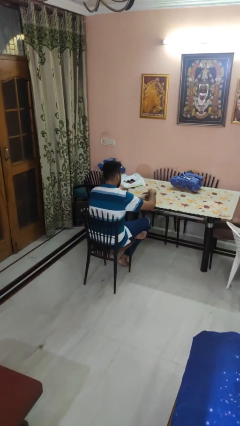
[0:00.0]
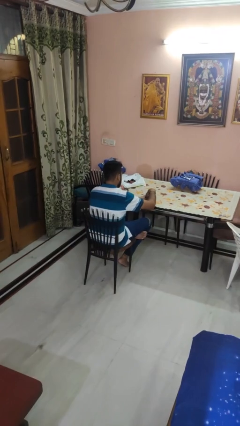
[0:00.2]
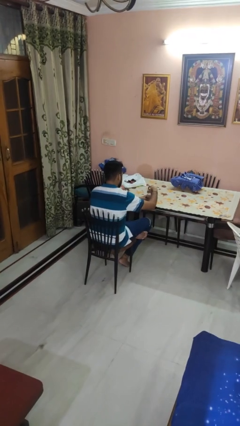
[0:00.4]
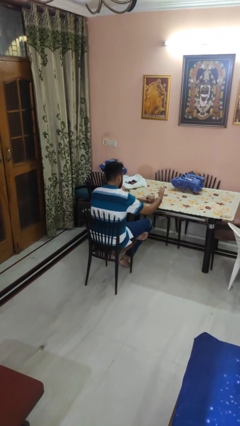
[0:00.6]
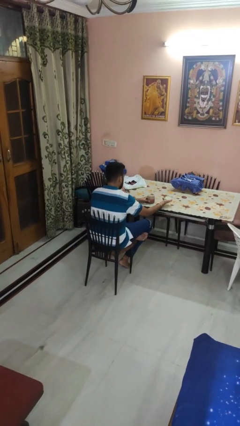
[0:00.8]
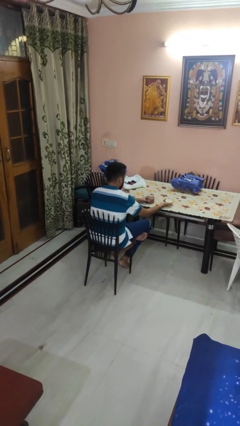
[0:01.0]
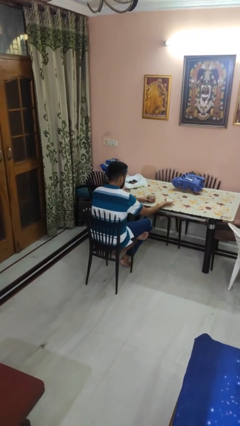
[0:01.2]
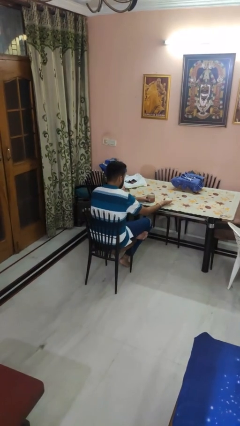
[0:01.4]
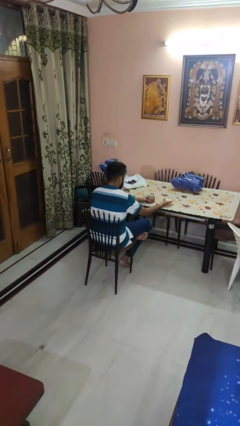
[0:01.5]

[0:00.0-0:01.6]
person opens jar

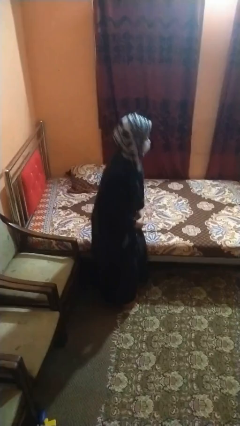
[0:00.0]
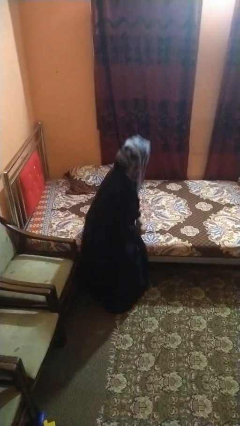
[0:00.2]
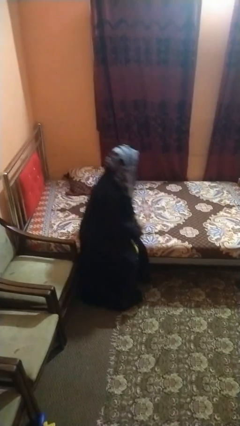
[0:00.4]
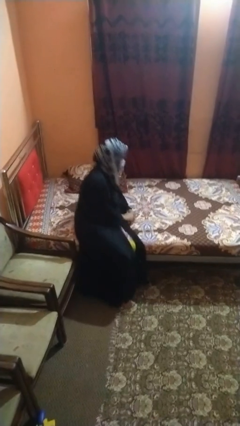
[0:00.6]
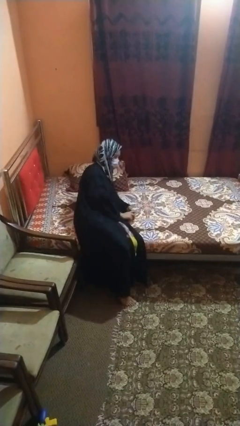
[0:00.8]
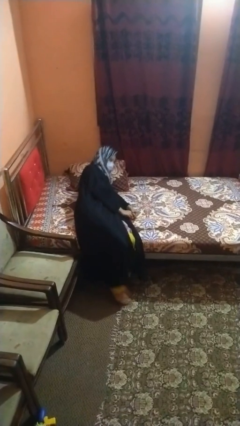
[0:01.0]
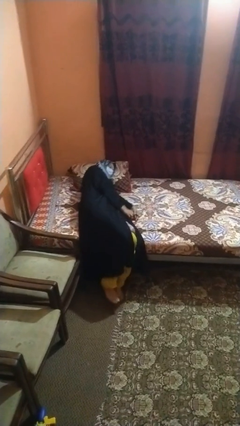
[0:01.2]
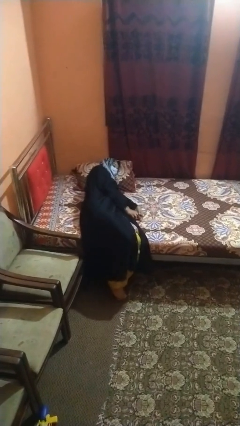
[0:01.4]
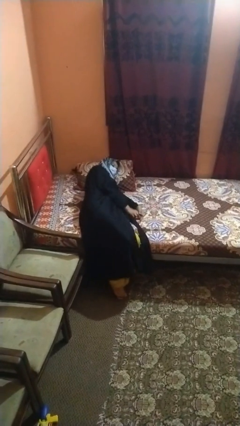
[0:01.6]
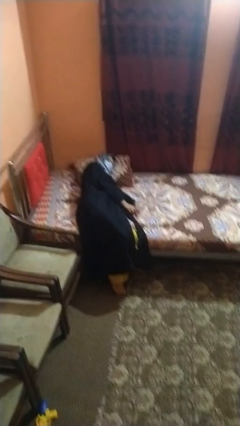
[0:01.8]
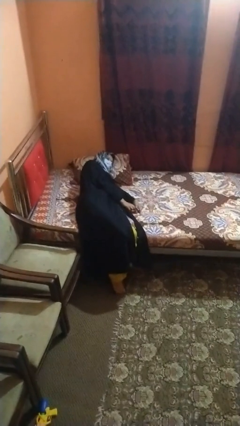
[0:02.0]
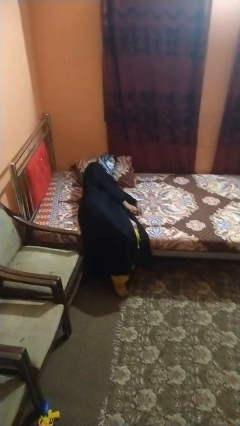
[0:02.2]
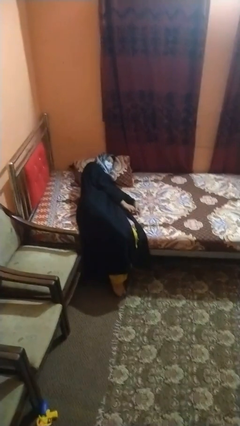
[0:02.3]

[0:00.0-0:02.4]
person lies down on bed

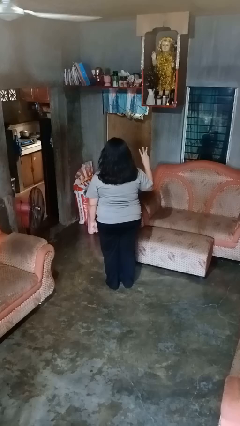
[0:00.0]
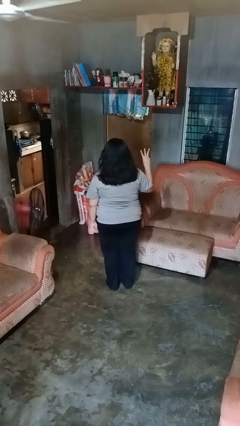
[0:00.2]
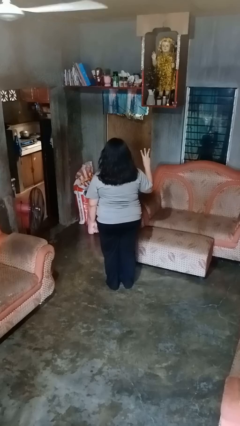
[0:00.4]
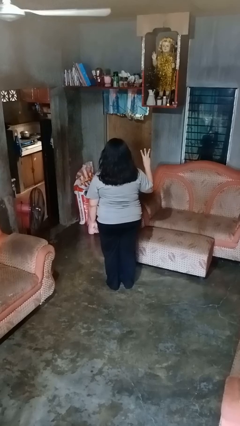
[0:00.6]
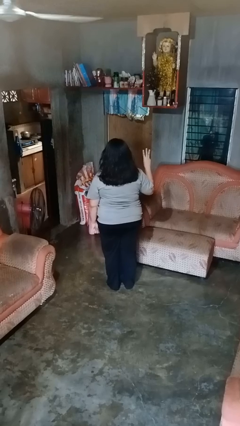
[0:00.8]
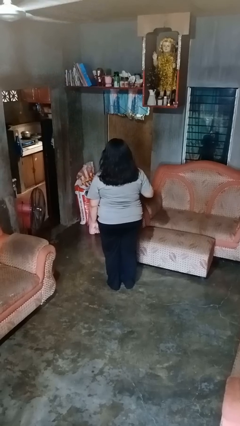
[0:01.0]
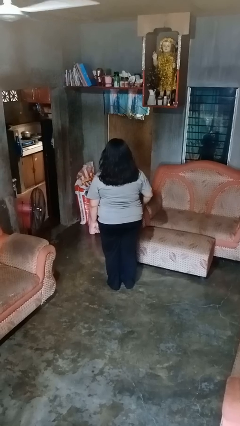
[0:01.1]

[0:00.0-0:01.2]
person gestures number three

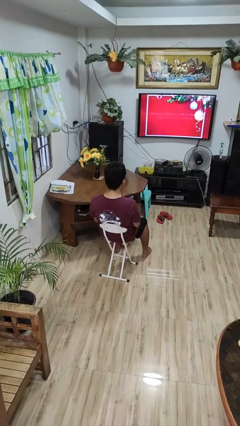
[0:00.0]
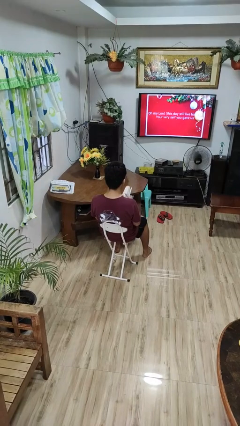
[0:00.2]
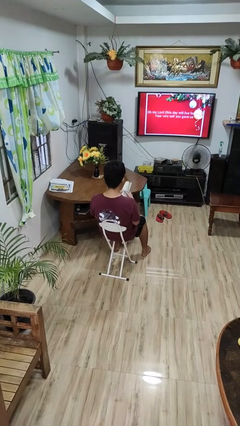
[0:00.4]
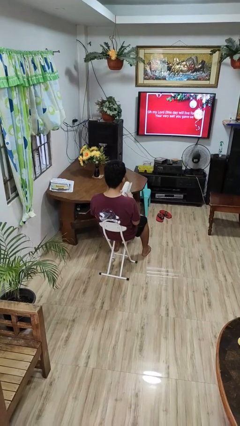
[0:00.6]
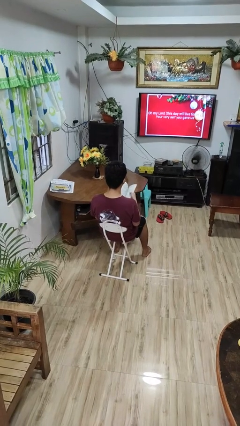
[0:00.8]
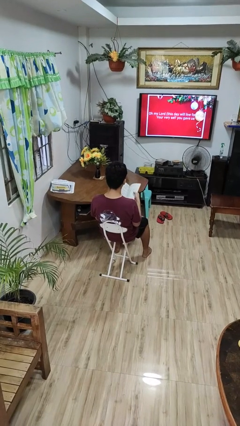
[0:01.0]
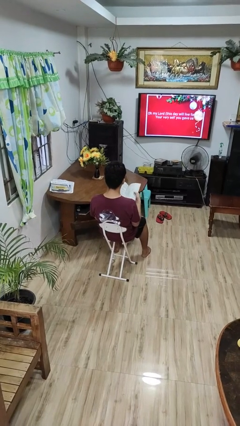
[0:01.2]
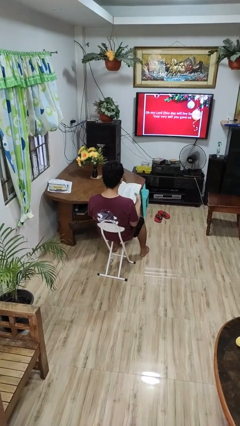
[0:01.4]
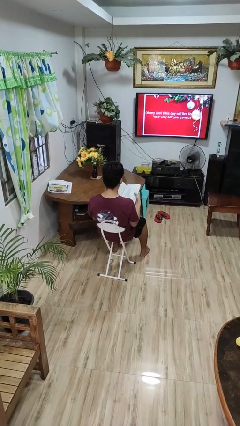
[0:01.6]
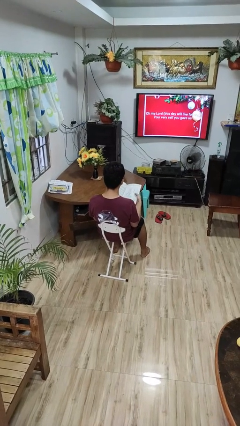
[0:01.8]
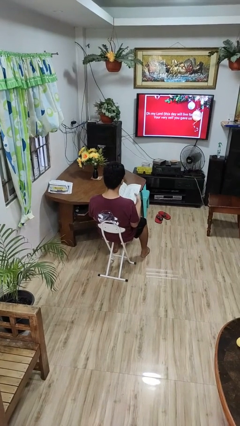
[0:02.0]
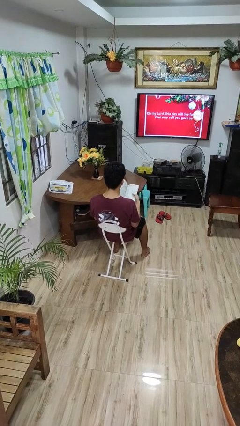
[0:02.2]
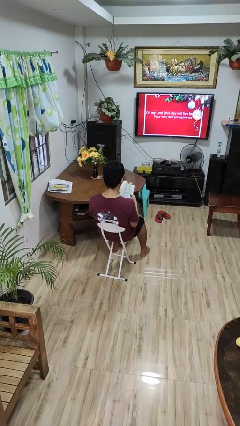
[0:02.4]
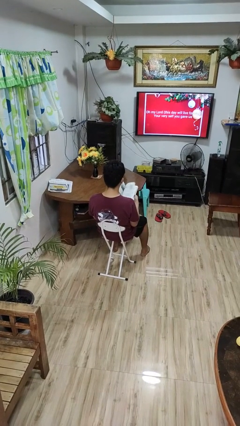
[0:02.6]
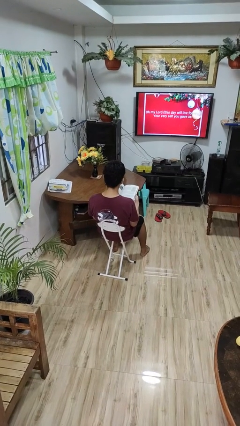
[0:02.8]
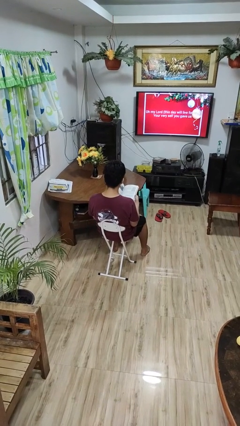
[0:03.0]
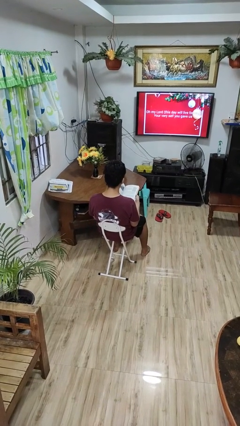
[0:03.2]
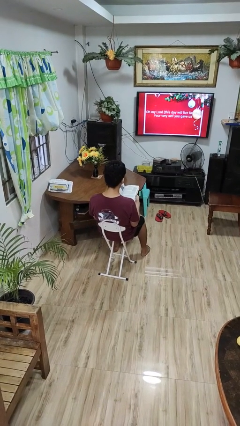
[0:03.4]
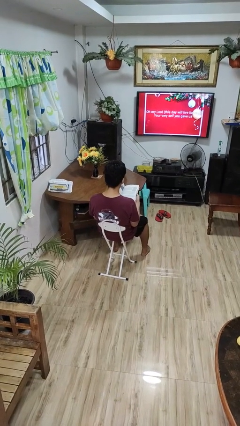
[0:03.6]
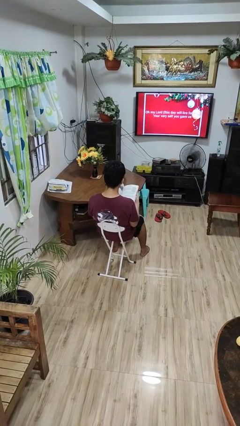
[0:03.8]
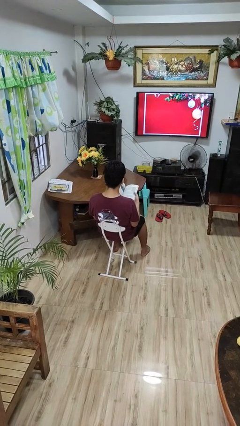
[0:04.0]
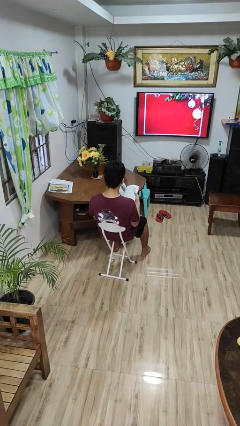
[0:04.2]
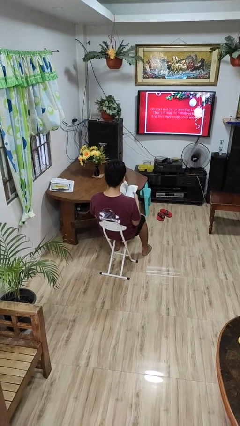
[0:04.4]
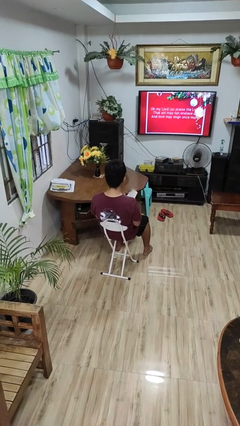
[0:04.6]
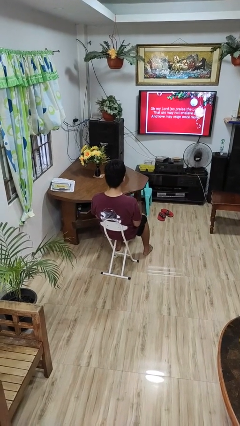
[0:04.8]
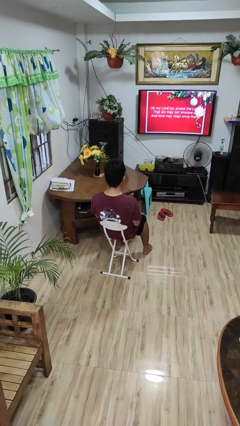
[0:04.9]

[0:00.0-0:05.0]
person reads book

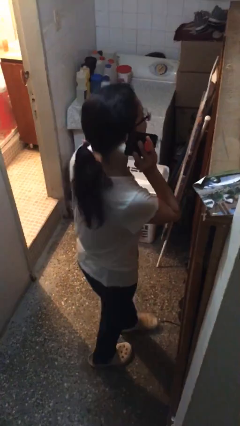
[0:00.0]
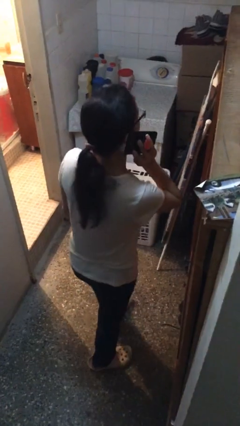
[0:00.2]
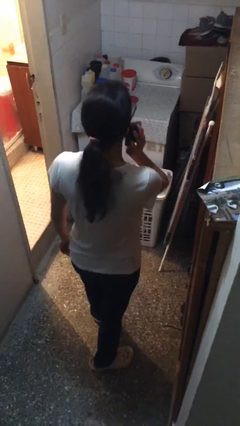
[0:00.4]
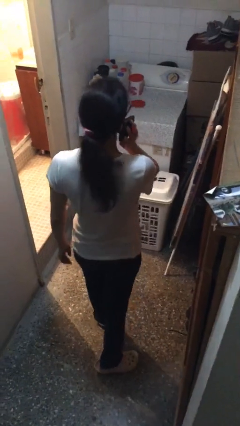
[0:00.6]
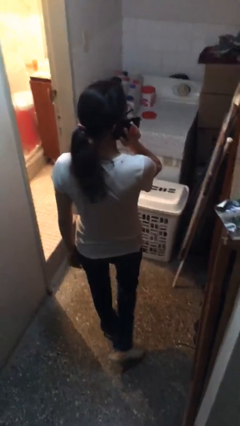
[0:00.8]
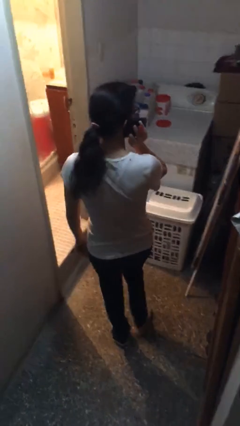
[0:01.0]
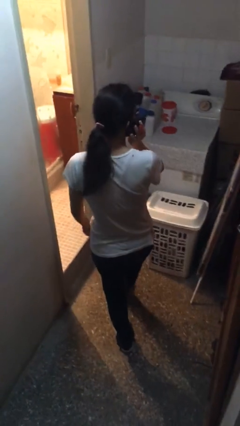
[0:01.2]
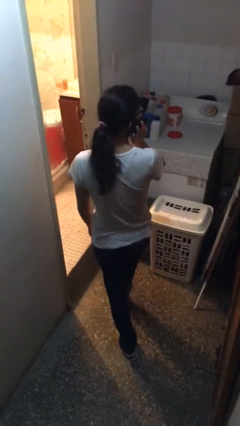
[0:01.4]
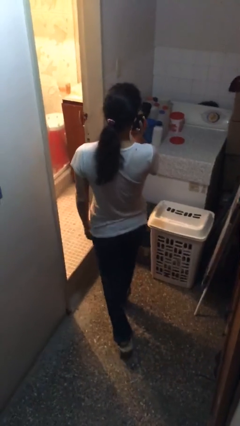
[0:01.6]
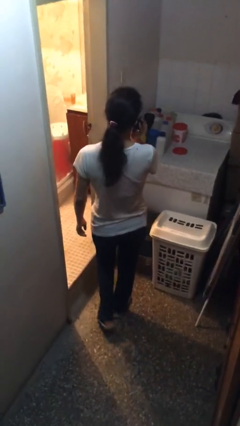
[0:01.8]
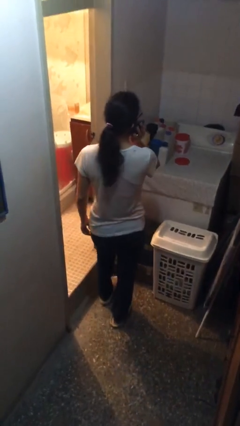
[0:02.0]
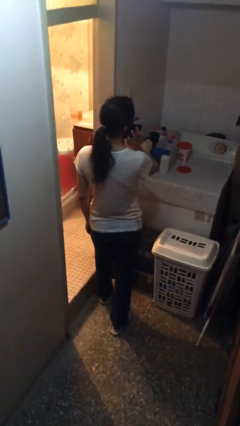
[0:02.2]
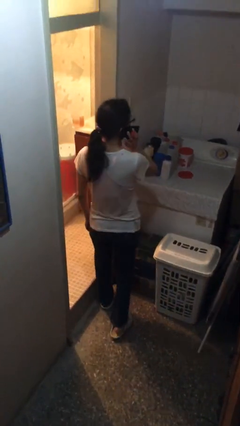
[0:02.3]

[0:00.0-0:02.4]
person talks on phone

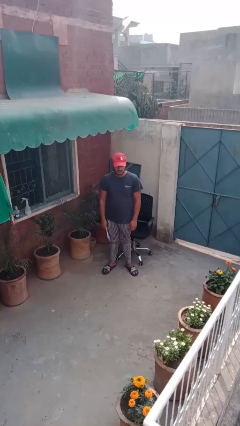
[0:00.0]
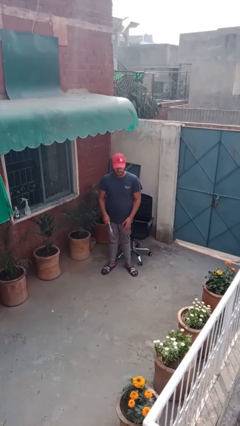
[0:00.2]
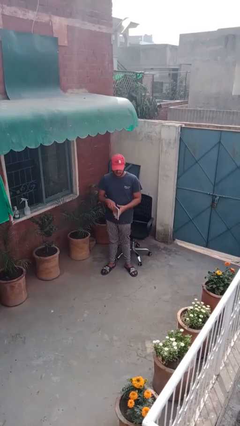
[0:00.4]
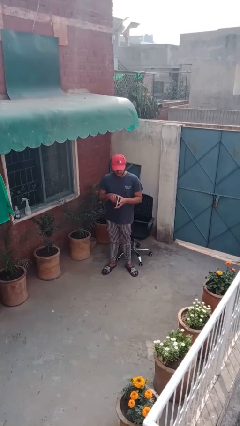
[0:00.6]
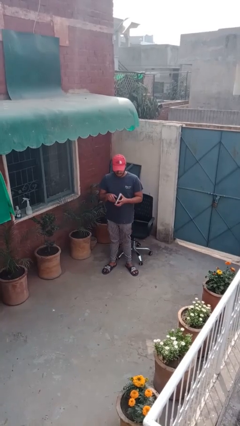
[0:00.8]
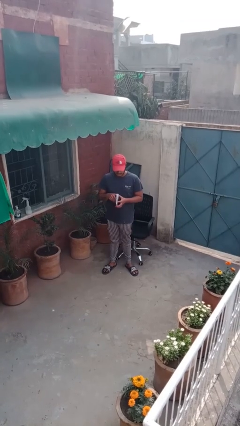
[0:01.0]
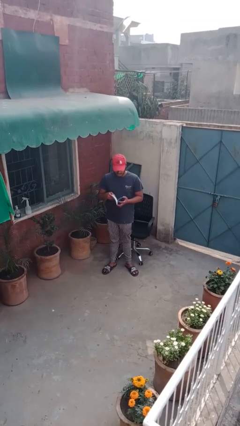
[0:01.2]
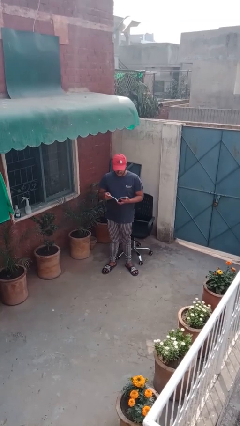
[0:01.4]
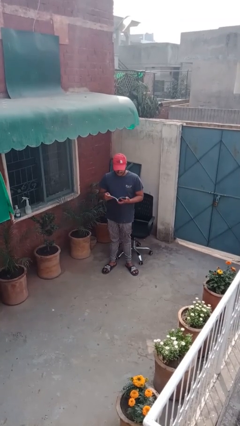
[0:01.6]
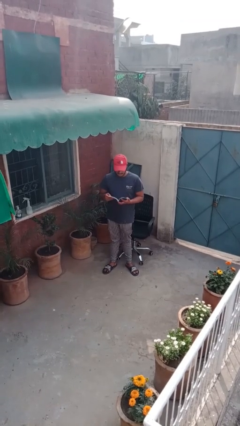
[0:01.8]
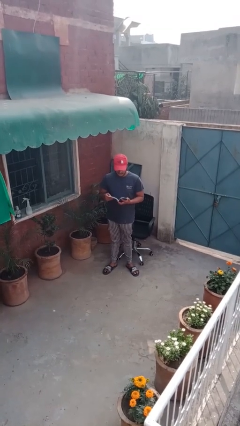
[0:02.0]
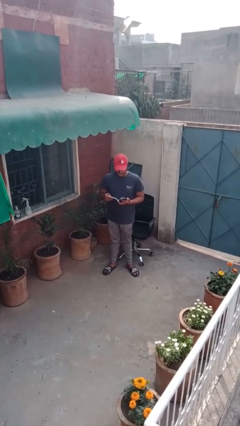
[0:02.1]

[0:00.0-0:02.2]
person reads document

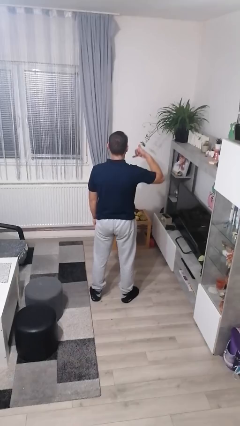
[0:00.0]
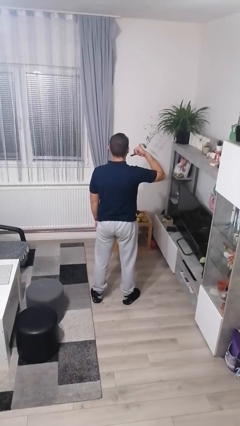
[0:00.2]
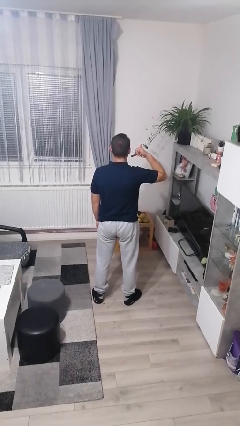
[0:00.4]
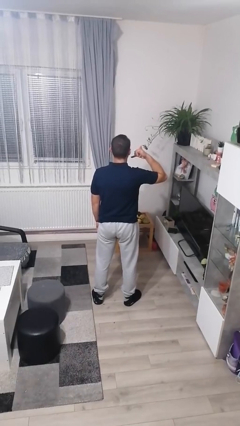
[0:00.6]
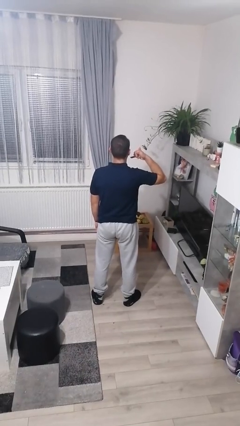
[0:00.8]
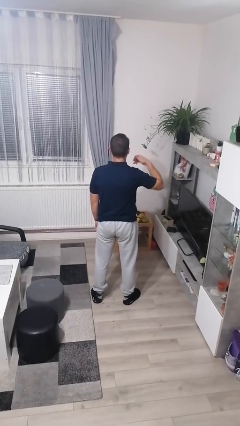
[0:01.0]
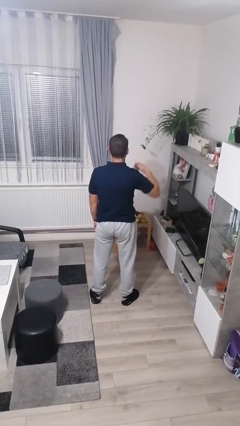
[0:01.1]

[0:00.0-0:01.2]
person gestures call me

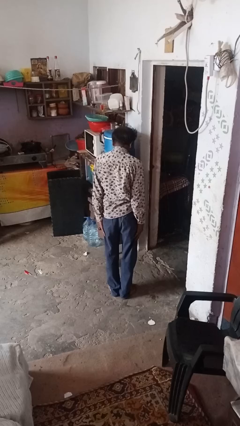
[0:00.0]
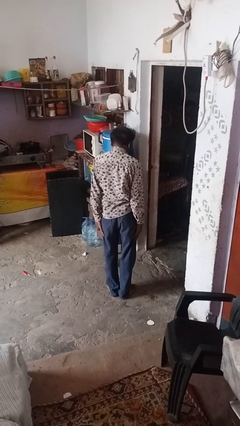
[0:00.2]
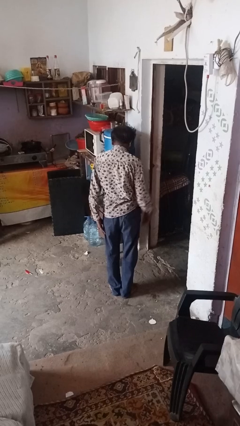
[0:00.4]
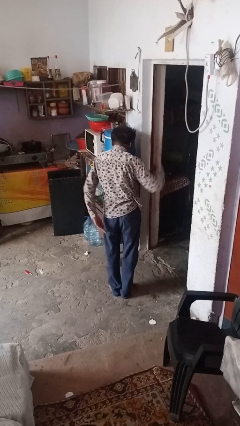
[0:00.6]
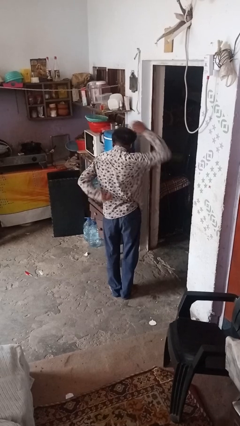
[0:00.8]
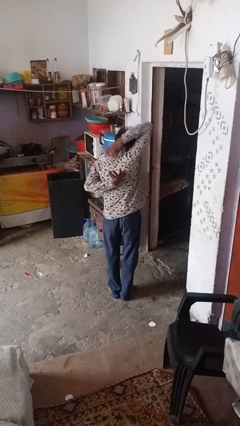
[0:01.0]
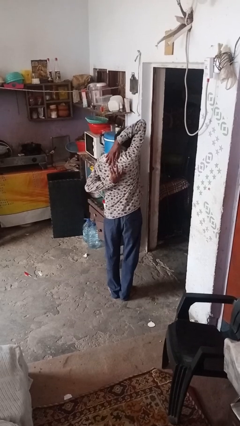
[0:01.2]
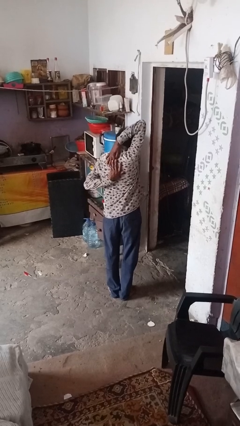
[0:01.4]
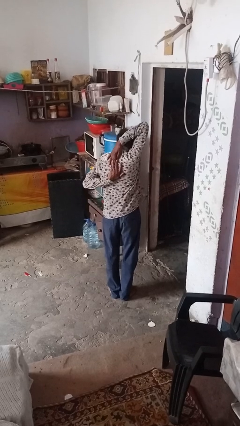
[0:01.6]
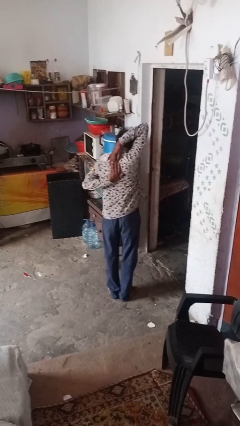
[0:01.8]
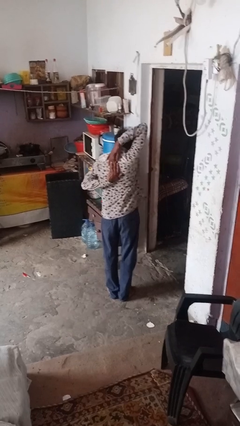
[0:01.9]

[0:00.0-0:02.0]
person stretches back
